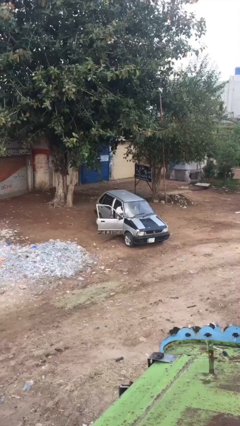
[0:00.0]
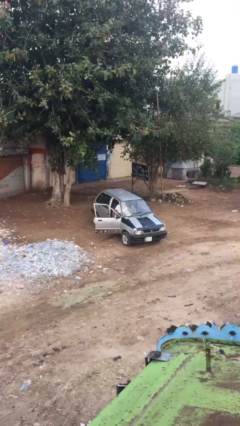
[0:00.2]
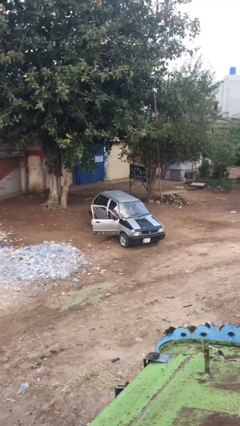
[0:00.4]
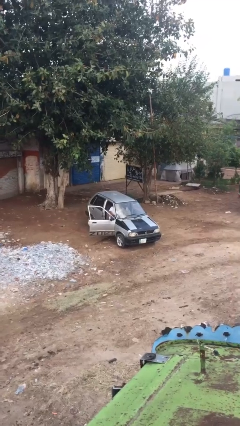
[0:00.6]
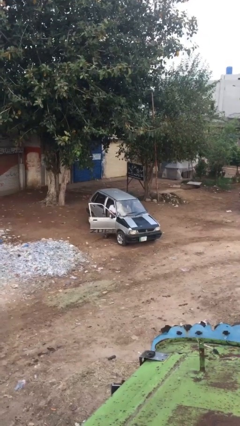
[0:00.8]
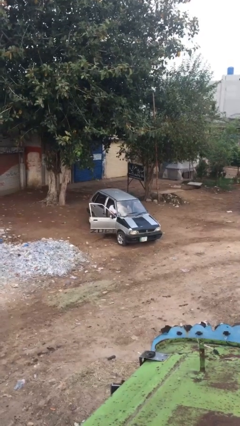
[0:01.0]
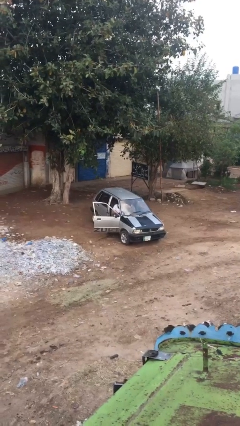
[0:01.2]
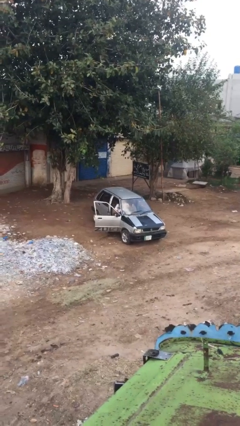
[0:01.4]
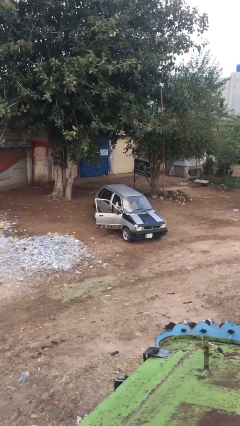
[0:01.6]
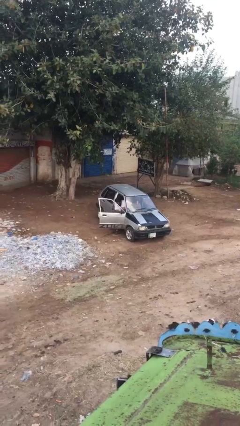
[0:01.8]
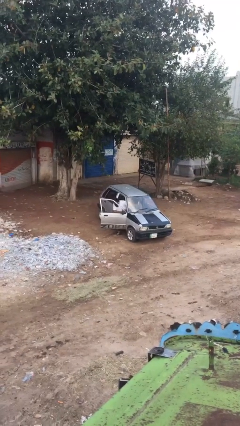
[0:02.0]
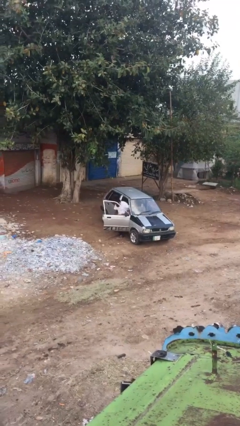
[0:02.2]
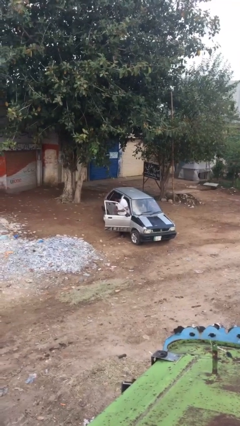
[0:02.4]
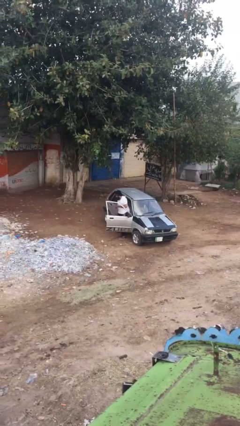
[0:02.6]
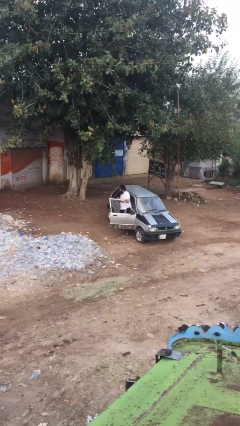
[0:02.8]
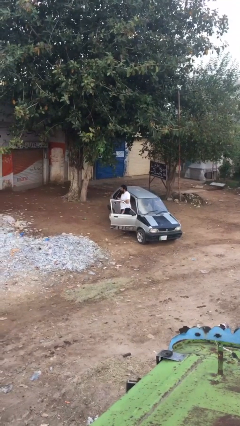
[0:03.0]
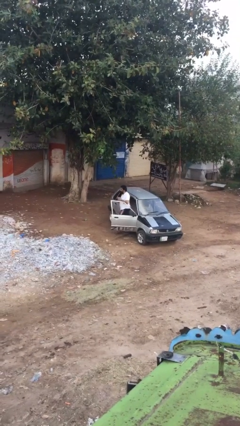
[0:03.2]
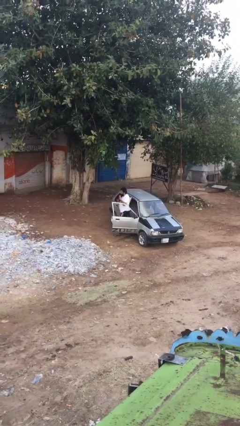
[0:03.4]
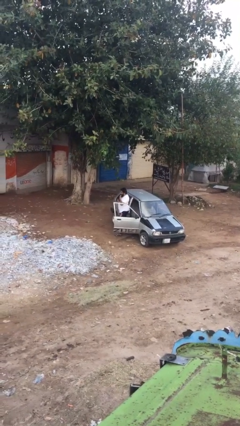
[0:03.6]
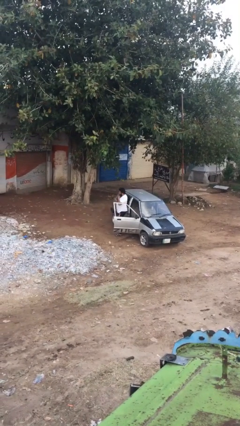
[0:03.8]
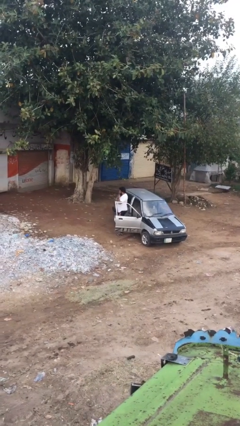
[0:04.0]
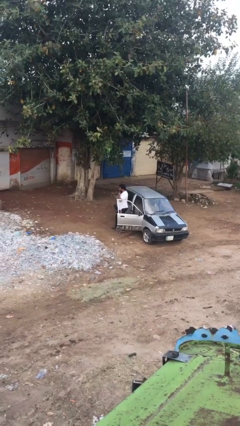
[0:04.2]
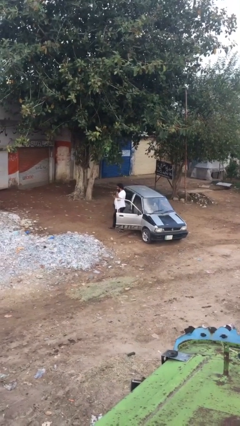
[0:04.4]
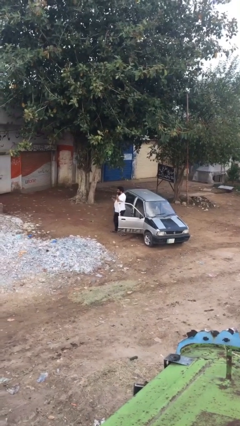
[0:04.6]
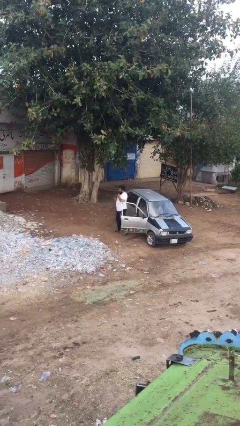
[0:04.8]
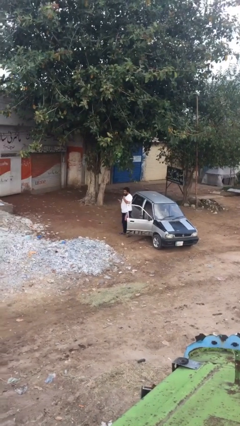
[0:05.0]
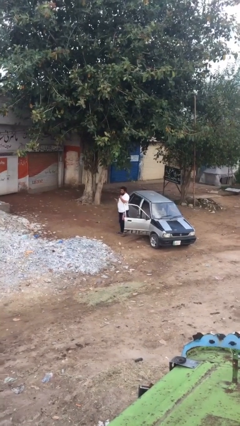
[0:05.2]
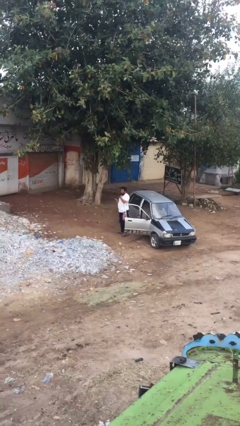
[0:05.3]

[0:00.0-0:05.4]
person exits car

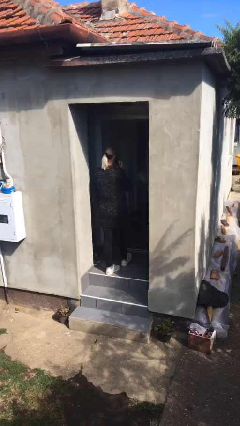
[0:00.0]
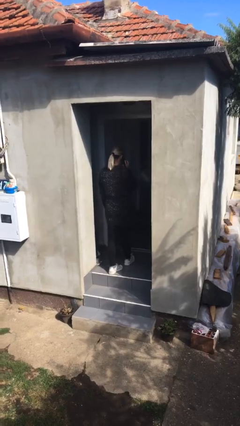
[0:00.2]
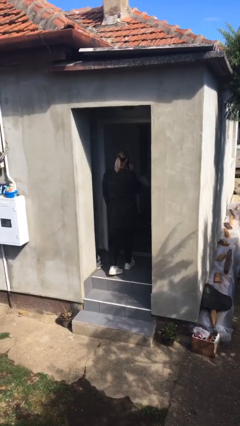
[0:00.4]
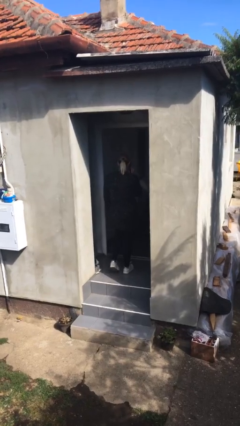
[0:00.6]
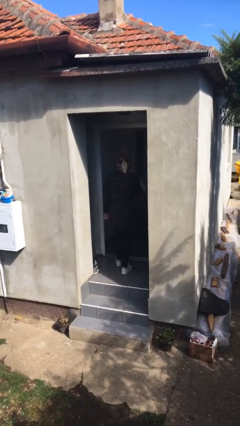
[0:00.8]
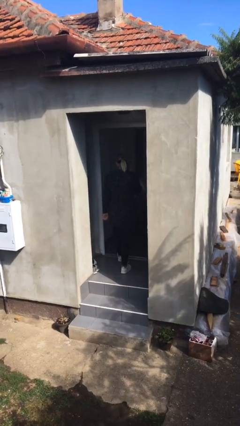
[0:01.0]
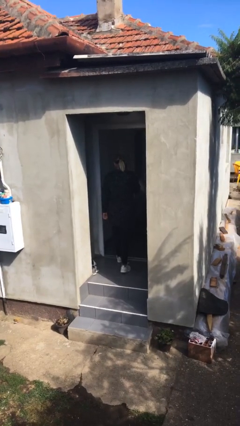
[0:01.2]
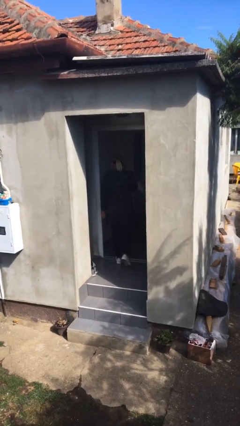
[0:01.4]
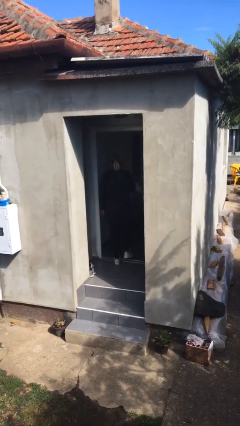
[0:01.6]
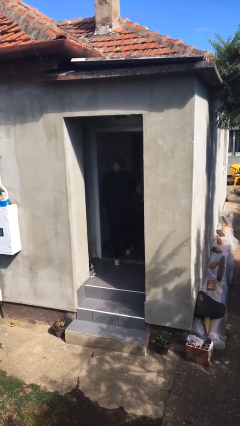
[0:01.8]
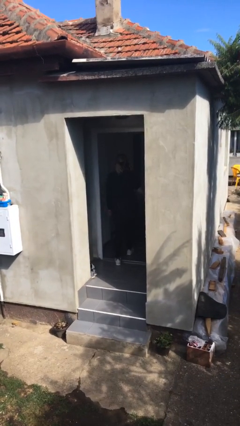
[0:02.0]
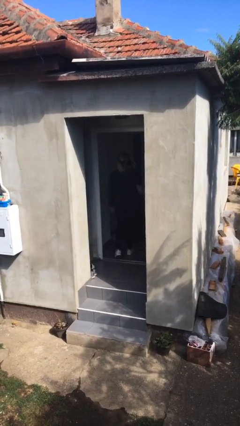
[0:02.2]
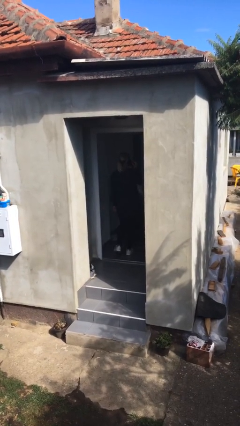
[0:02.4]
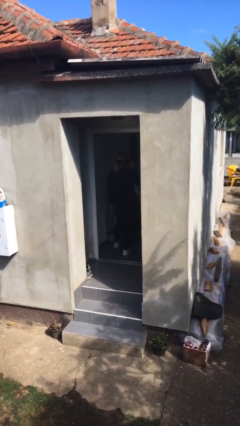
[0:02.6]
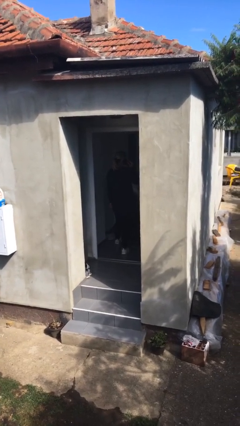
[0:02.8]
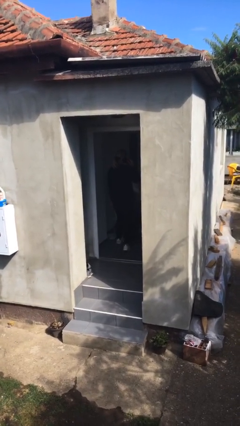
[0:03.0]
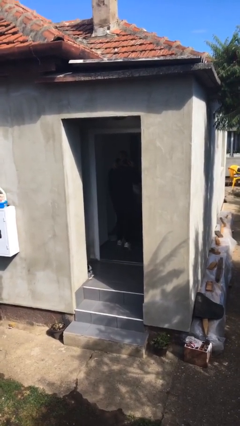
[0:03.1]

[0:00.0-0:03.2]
person exits scene through structure

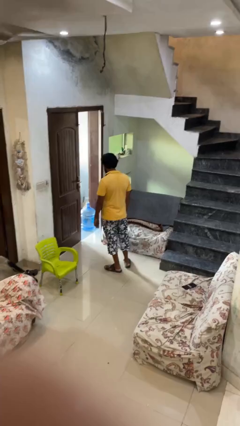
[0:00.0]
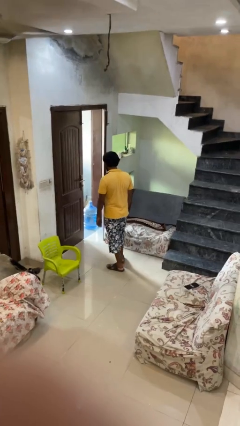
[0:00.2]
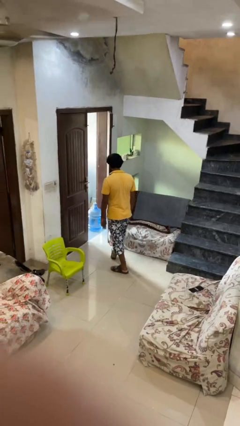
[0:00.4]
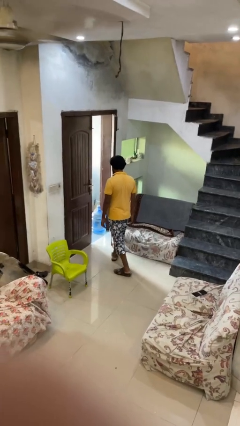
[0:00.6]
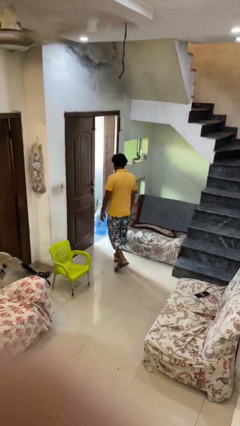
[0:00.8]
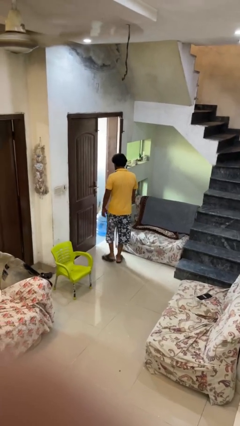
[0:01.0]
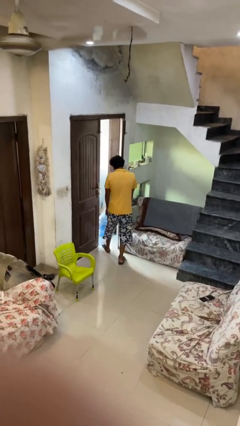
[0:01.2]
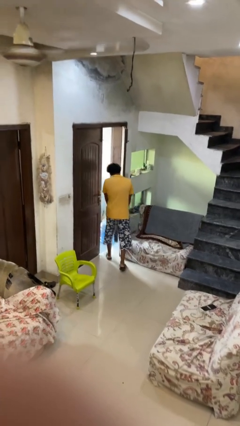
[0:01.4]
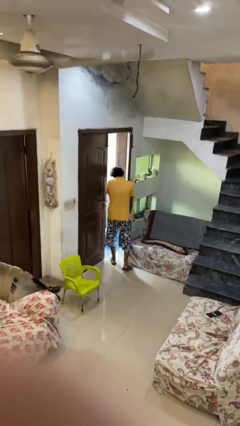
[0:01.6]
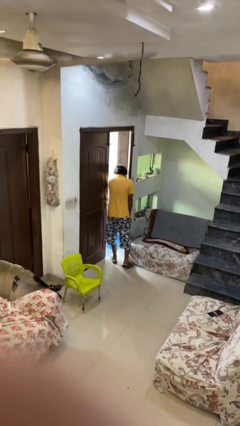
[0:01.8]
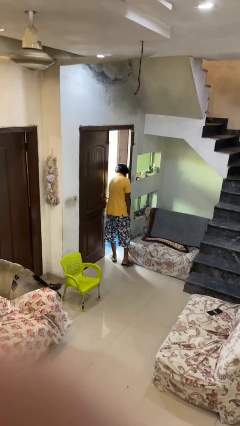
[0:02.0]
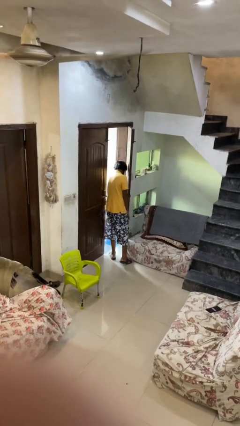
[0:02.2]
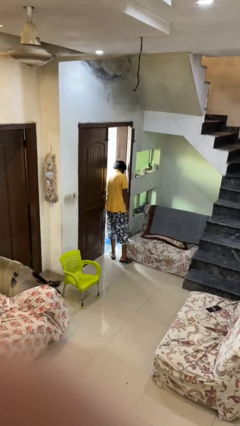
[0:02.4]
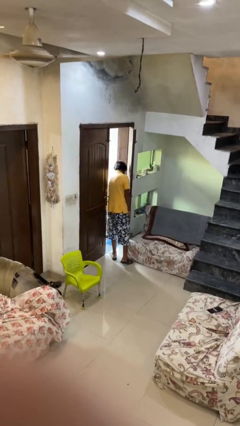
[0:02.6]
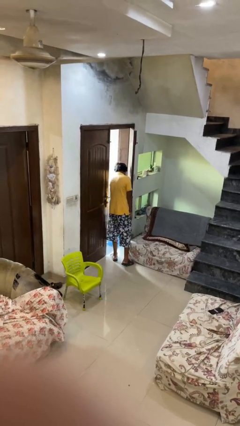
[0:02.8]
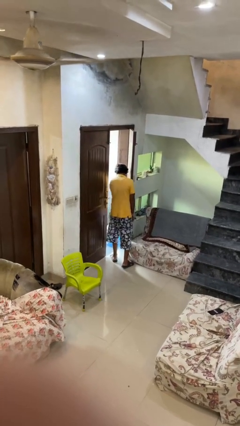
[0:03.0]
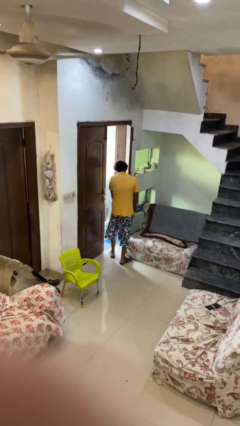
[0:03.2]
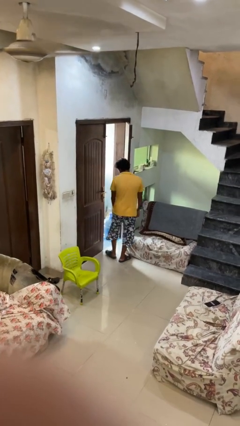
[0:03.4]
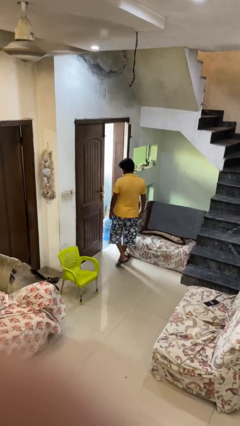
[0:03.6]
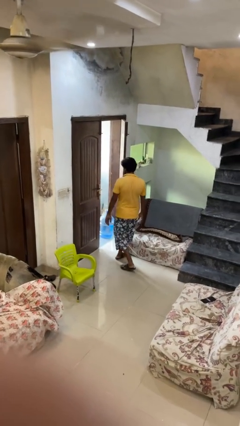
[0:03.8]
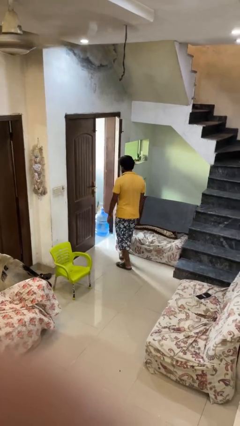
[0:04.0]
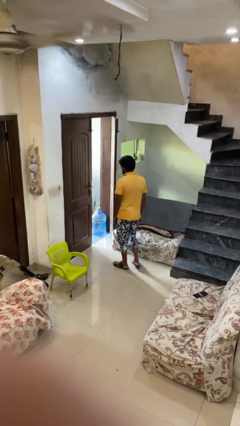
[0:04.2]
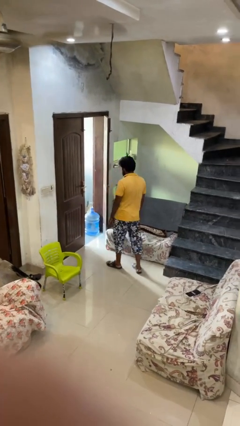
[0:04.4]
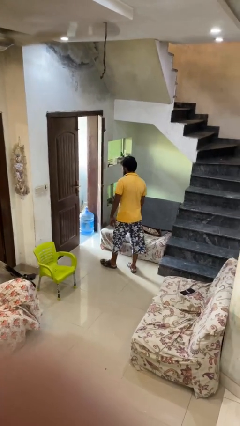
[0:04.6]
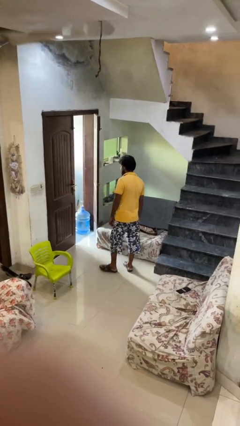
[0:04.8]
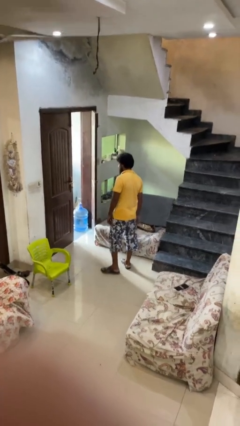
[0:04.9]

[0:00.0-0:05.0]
person bumps into wall

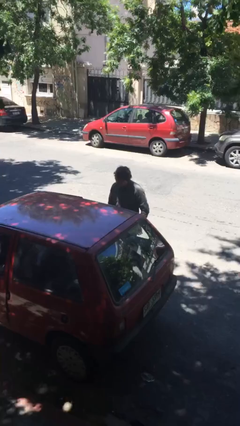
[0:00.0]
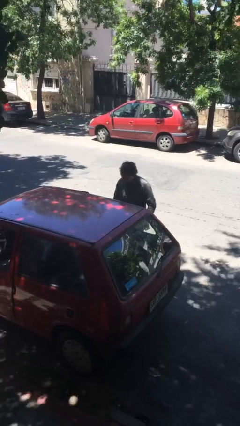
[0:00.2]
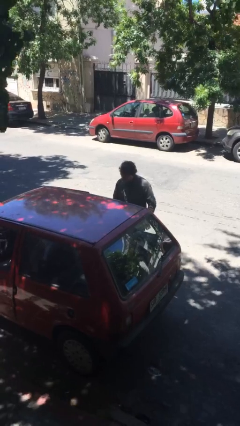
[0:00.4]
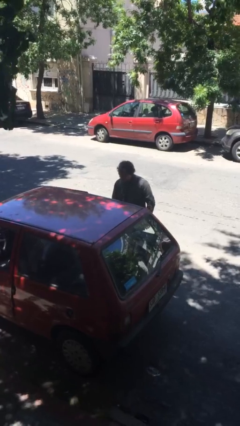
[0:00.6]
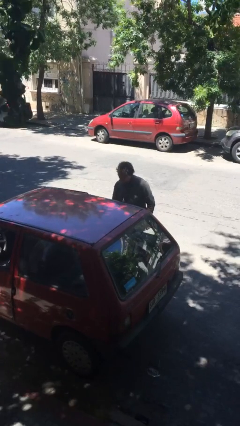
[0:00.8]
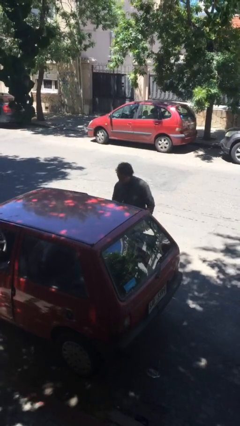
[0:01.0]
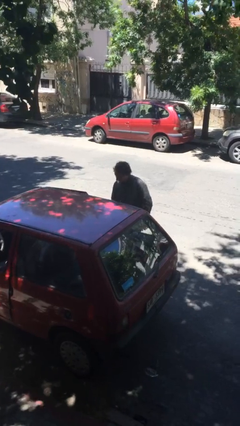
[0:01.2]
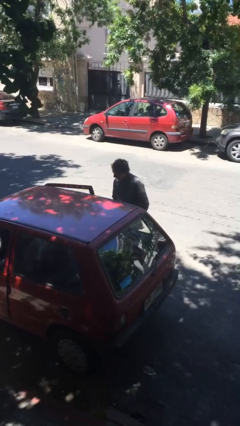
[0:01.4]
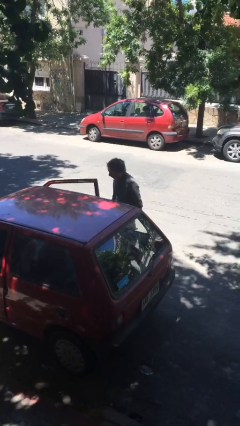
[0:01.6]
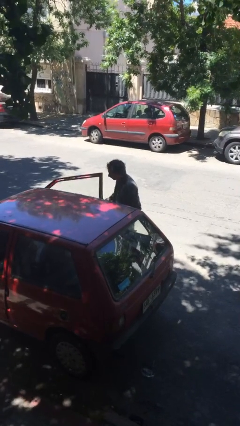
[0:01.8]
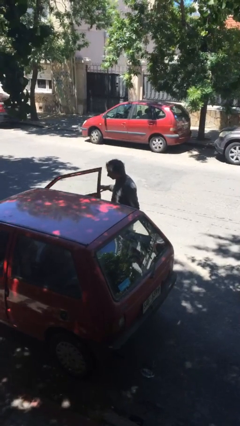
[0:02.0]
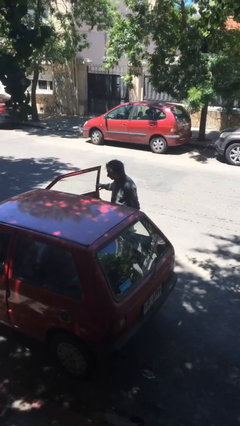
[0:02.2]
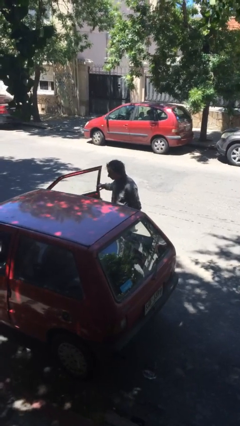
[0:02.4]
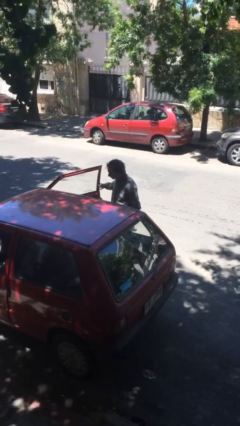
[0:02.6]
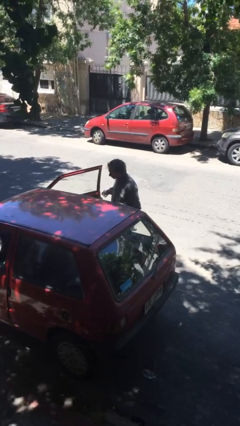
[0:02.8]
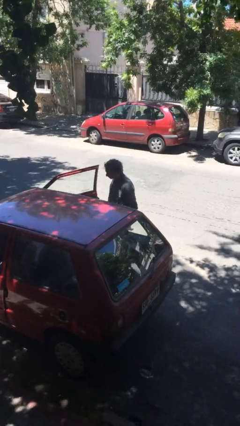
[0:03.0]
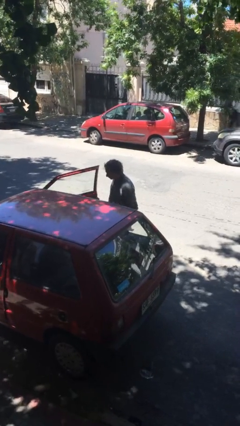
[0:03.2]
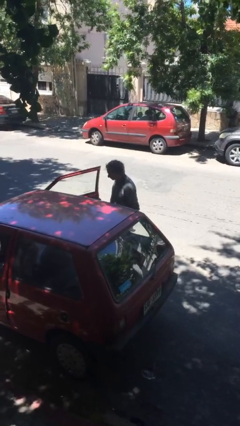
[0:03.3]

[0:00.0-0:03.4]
person opens car door

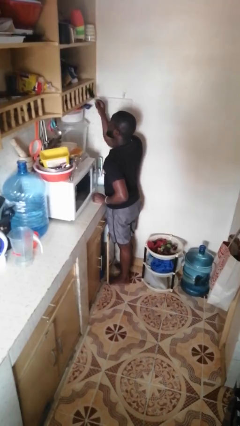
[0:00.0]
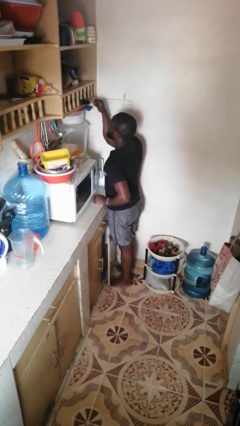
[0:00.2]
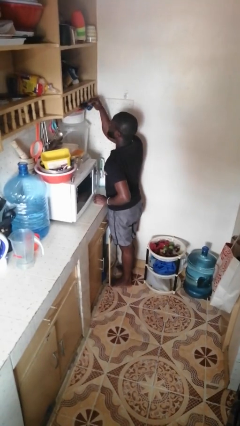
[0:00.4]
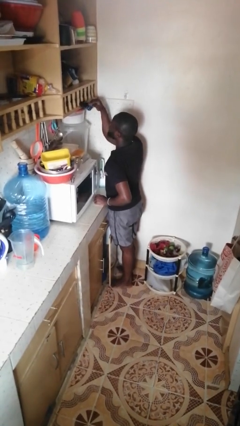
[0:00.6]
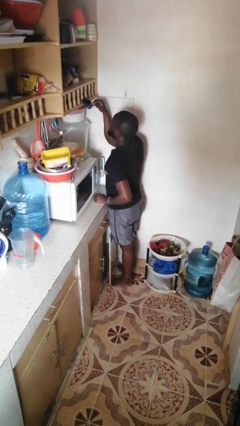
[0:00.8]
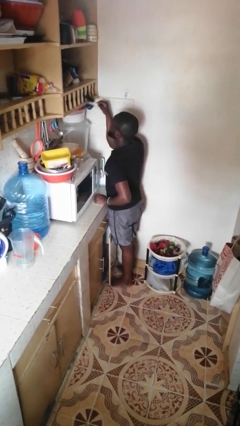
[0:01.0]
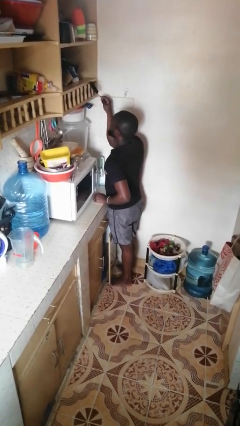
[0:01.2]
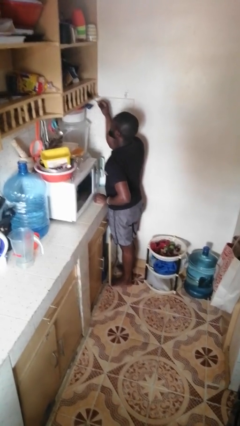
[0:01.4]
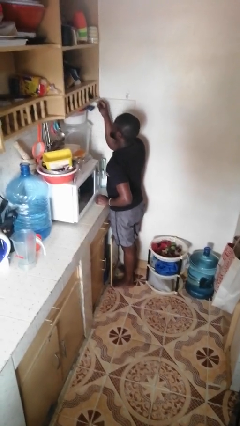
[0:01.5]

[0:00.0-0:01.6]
person dusts furniture
